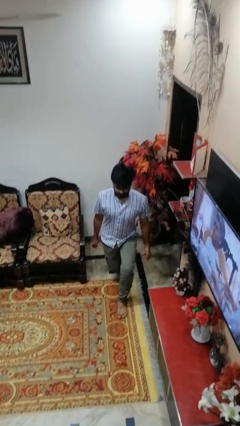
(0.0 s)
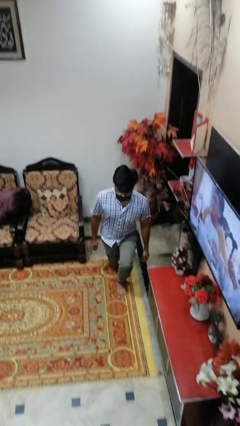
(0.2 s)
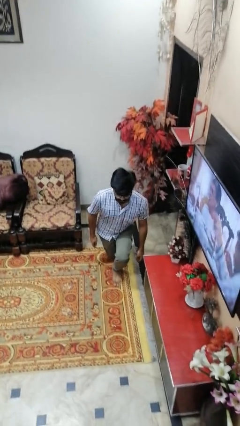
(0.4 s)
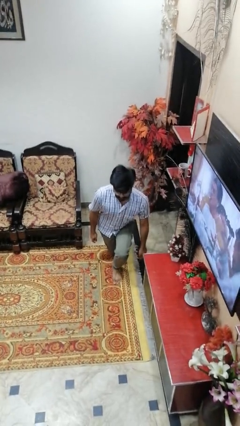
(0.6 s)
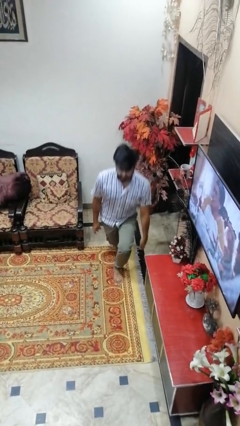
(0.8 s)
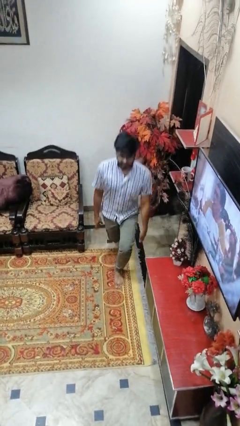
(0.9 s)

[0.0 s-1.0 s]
person exercises with lunges

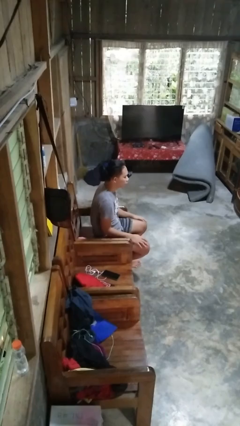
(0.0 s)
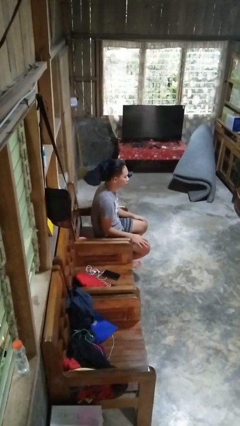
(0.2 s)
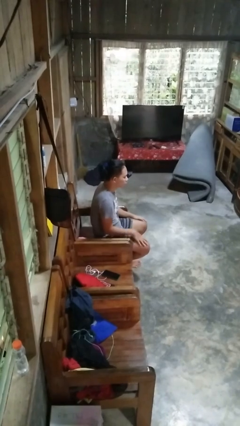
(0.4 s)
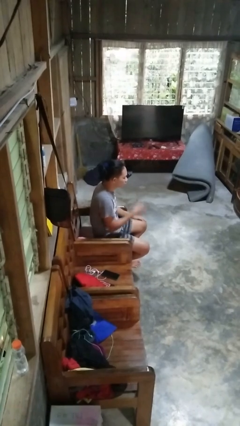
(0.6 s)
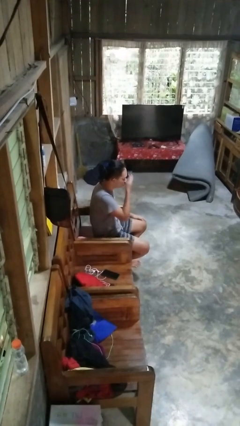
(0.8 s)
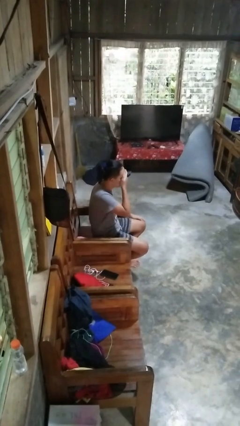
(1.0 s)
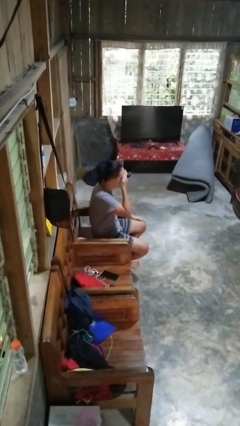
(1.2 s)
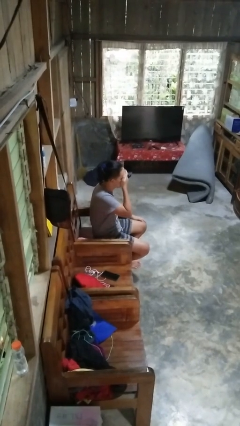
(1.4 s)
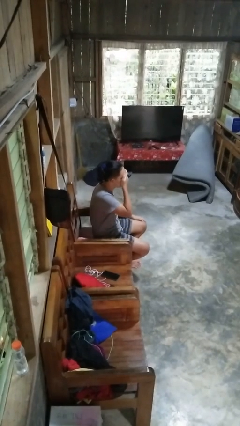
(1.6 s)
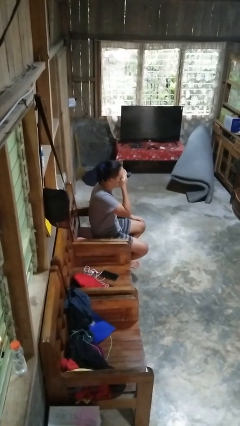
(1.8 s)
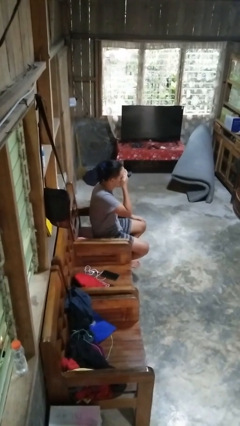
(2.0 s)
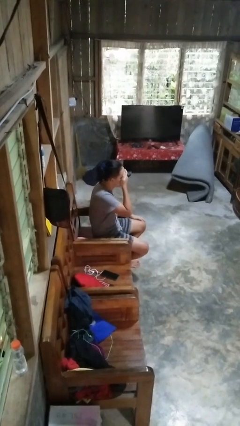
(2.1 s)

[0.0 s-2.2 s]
person covers face with hands

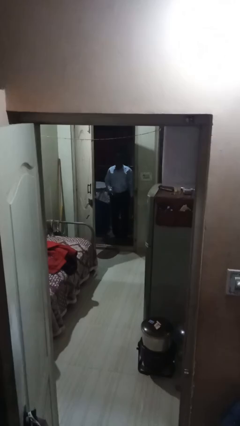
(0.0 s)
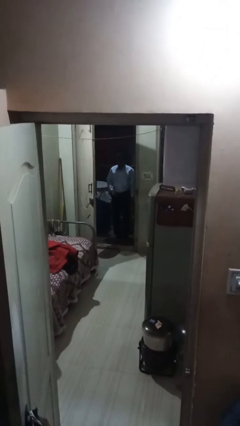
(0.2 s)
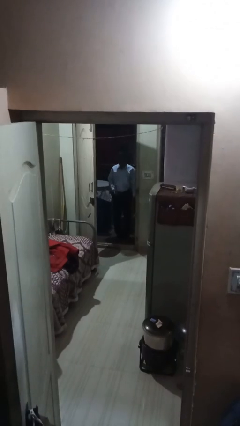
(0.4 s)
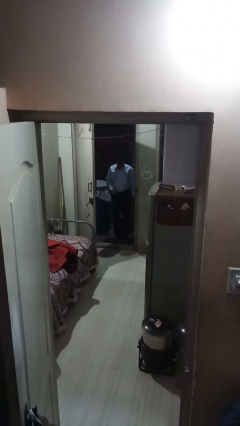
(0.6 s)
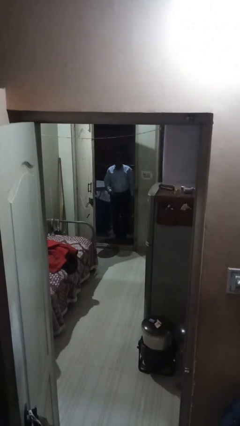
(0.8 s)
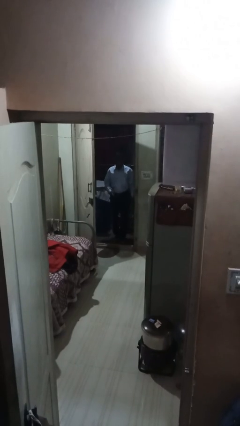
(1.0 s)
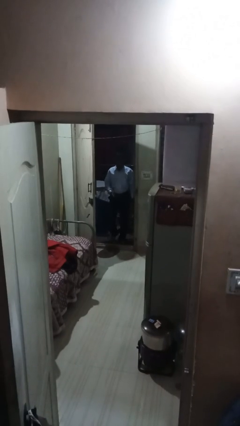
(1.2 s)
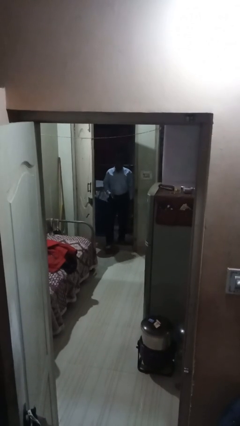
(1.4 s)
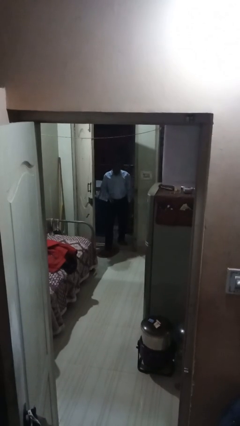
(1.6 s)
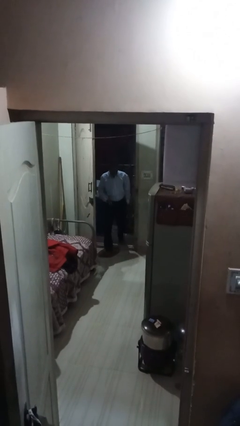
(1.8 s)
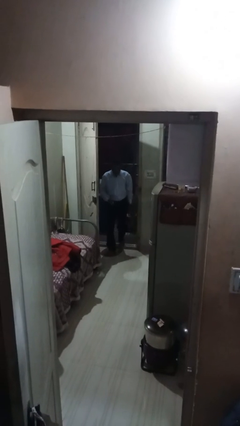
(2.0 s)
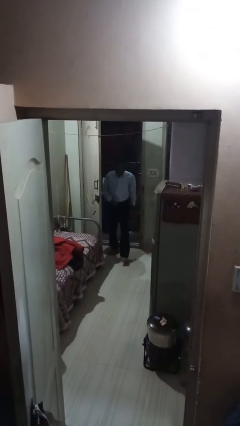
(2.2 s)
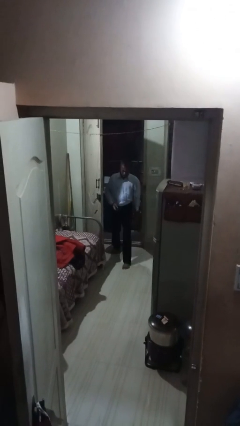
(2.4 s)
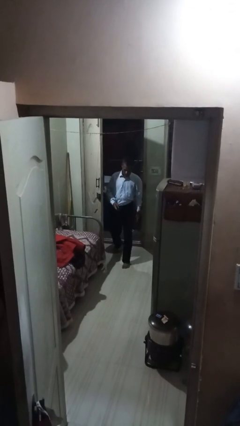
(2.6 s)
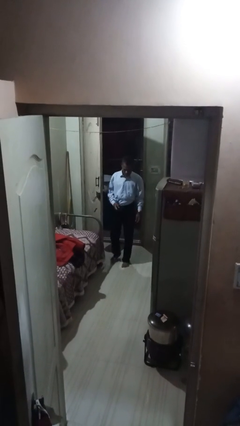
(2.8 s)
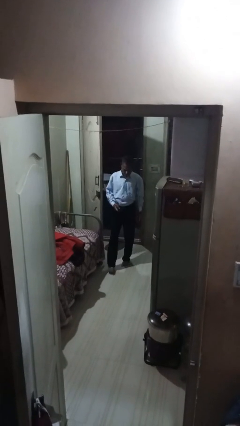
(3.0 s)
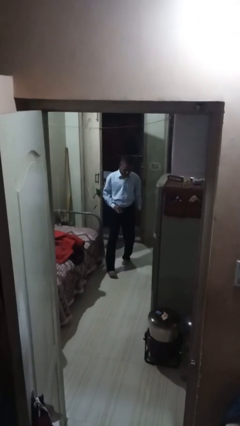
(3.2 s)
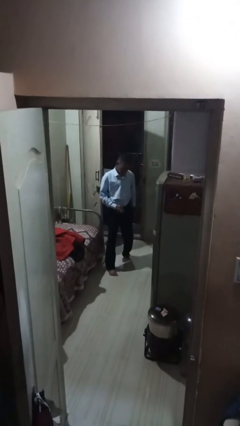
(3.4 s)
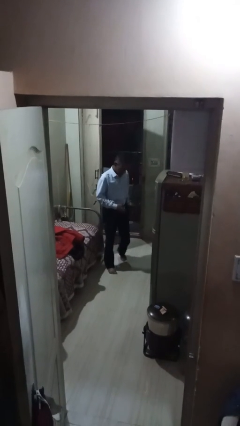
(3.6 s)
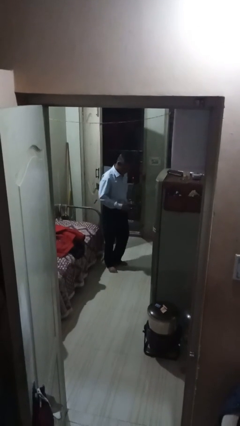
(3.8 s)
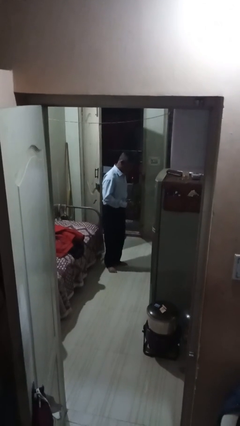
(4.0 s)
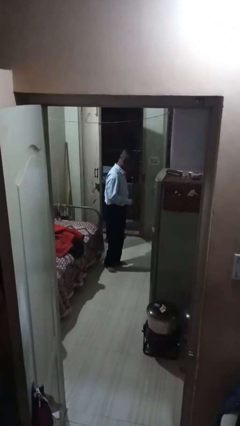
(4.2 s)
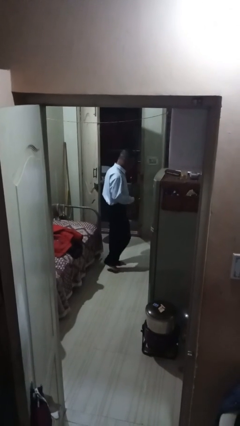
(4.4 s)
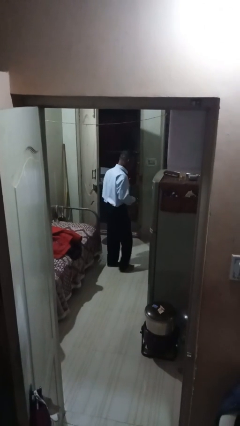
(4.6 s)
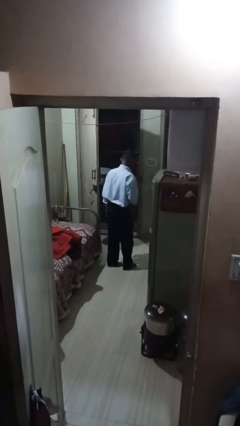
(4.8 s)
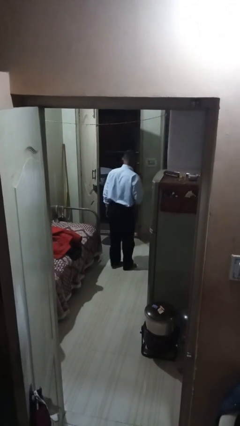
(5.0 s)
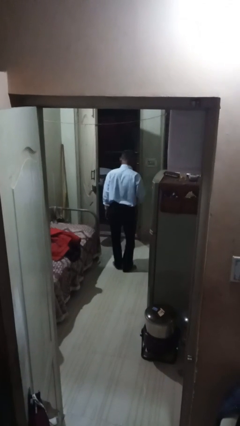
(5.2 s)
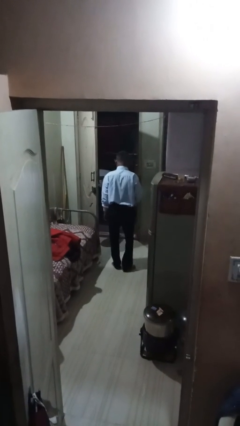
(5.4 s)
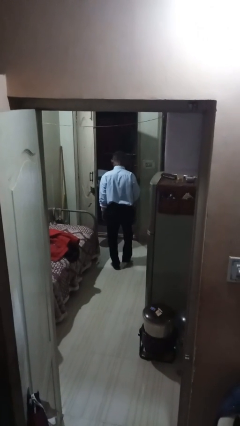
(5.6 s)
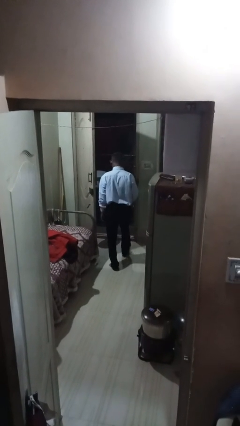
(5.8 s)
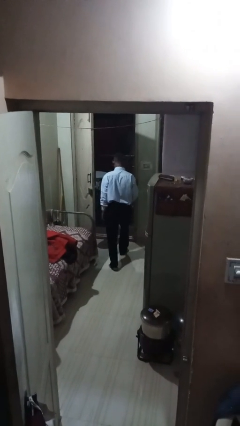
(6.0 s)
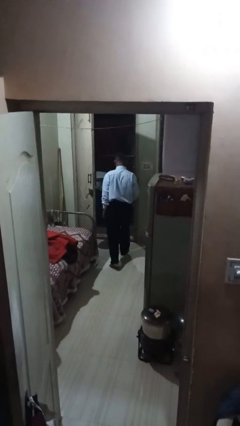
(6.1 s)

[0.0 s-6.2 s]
person enters scene through structure

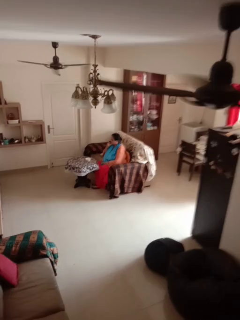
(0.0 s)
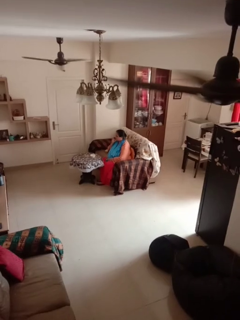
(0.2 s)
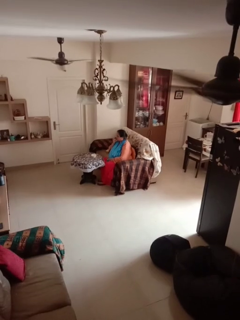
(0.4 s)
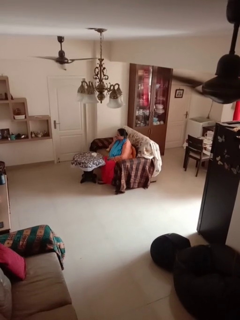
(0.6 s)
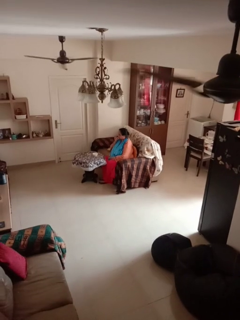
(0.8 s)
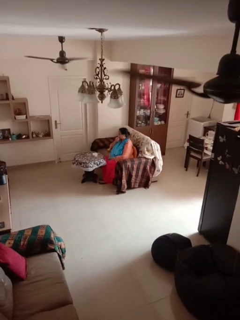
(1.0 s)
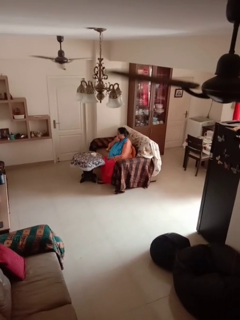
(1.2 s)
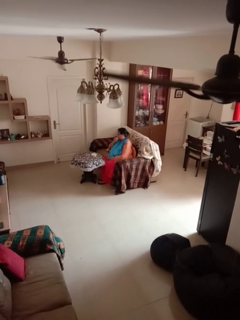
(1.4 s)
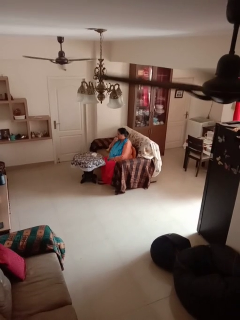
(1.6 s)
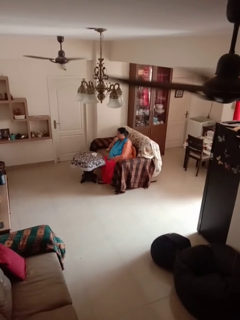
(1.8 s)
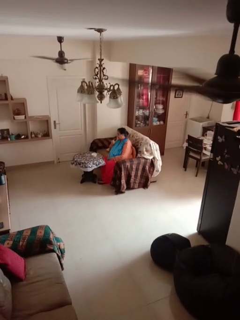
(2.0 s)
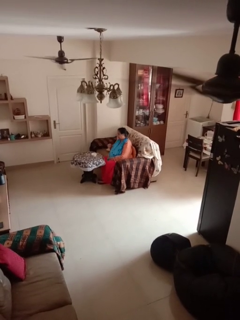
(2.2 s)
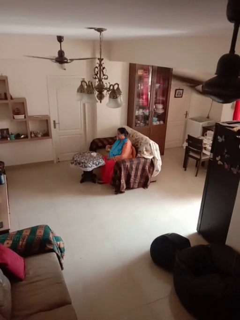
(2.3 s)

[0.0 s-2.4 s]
person licks fingers

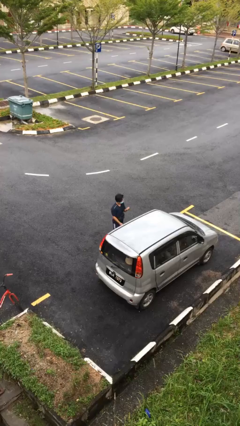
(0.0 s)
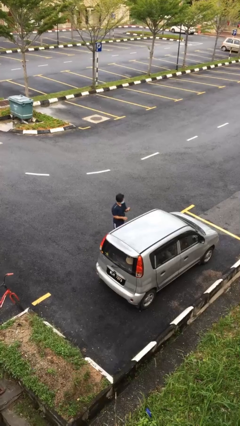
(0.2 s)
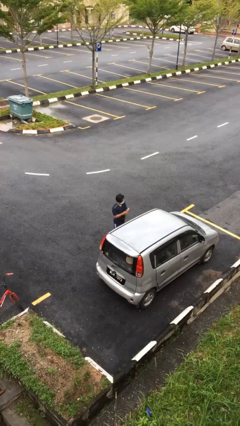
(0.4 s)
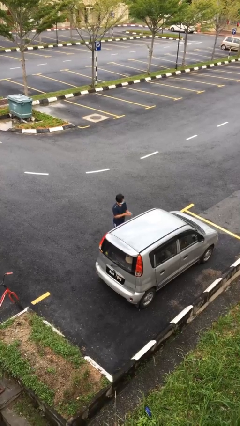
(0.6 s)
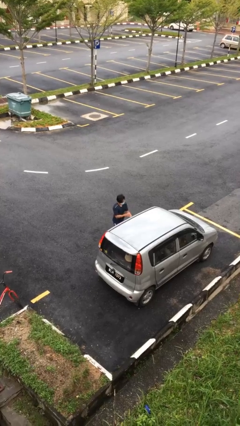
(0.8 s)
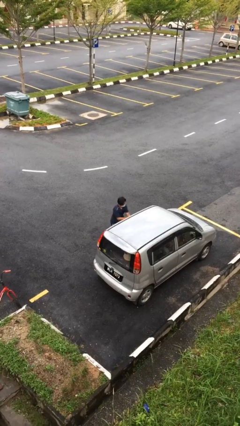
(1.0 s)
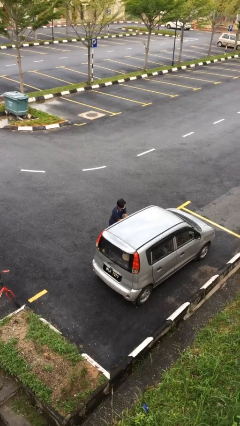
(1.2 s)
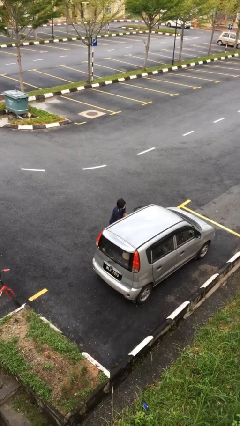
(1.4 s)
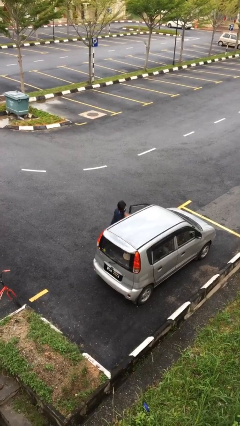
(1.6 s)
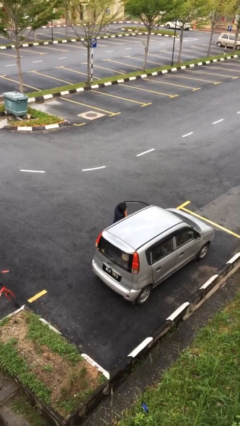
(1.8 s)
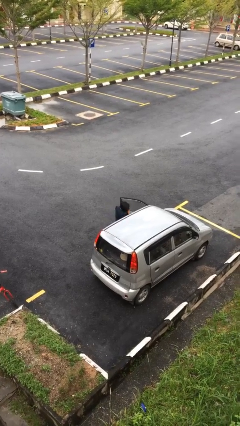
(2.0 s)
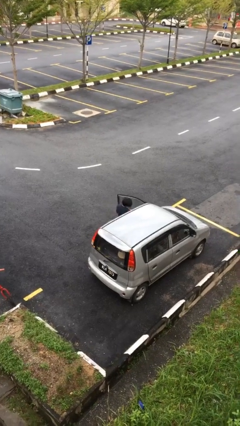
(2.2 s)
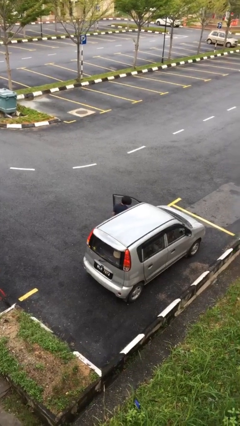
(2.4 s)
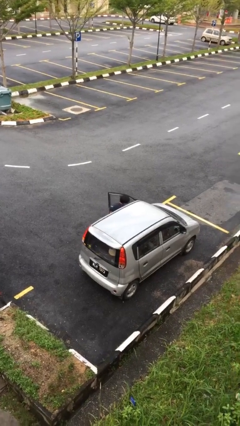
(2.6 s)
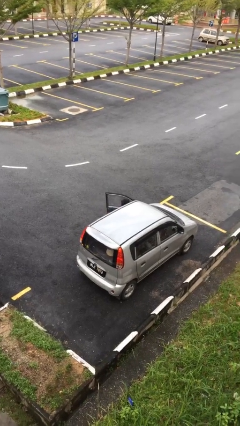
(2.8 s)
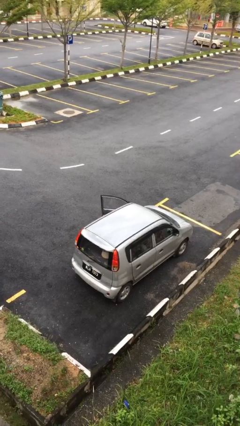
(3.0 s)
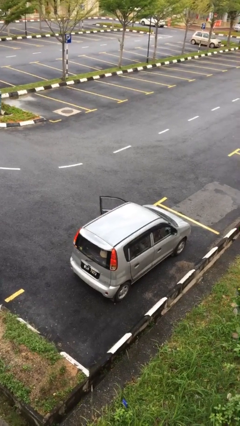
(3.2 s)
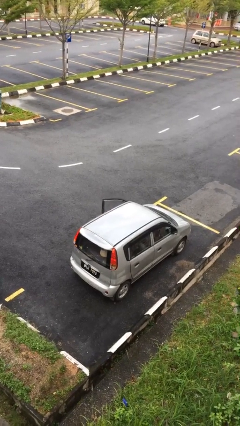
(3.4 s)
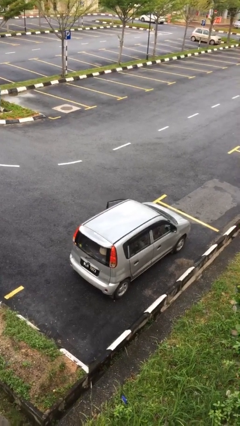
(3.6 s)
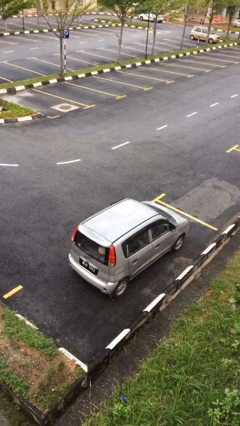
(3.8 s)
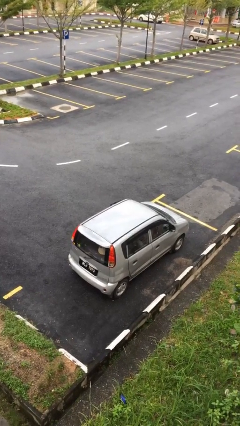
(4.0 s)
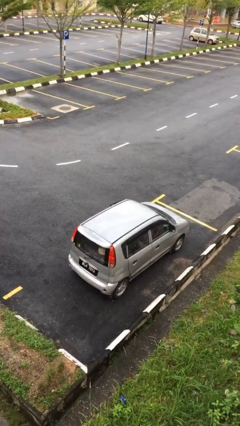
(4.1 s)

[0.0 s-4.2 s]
person enters car

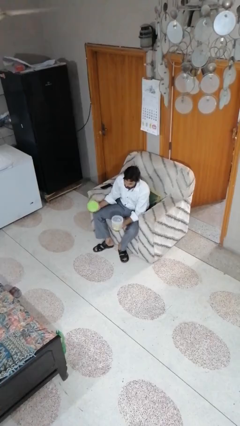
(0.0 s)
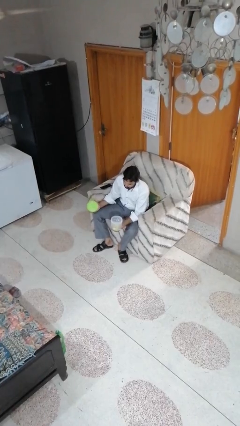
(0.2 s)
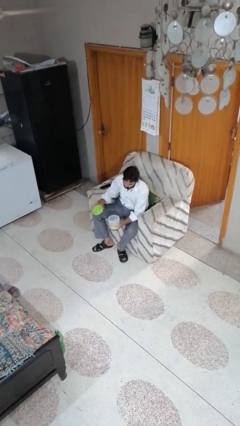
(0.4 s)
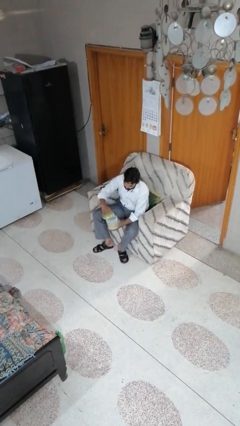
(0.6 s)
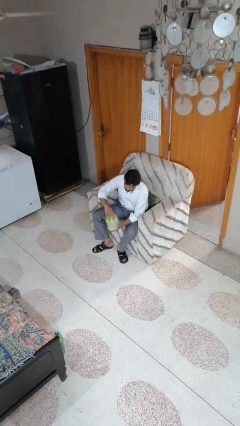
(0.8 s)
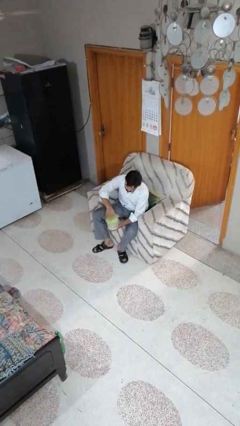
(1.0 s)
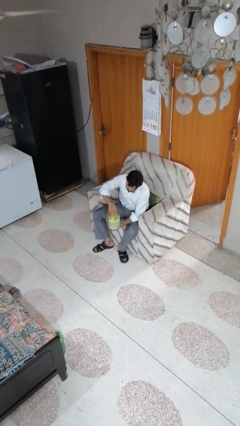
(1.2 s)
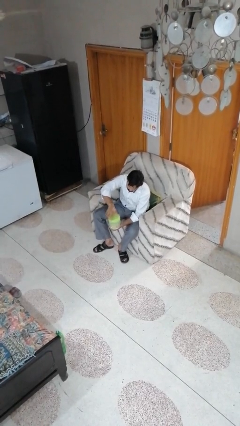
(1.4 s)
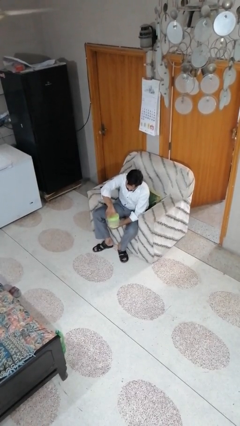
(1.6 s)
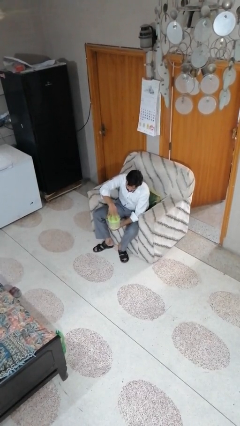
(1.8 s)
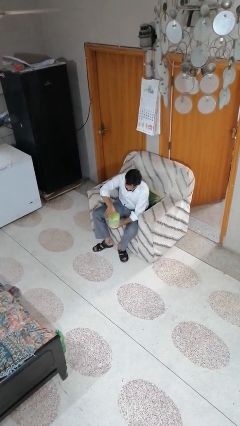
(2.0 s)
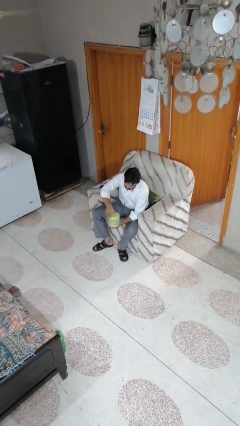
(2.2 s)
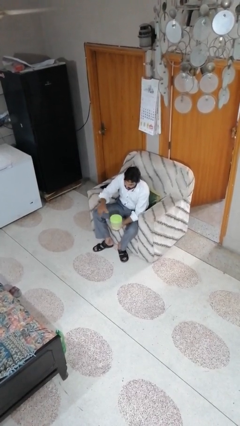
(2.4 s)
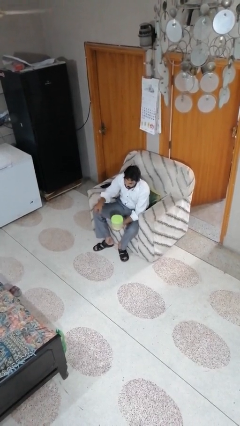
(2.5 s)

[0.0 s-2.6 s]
person closes jar
